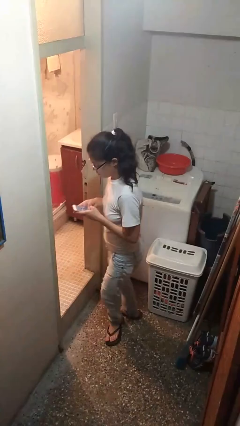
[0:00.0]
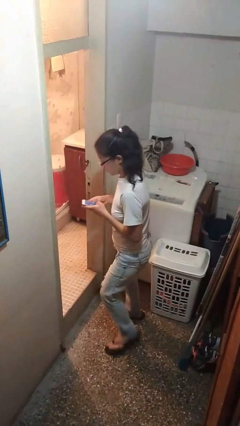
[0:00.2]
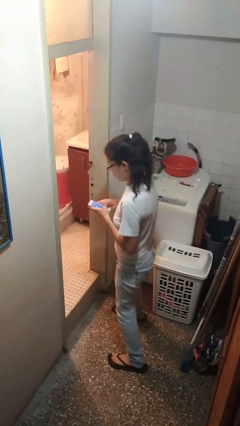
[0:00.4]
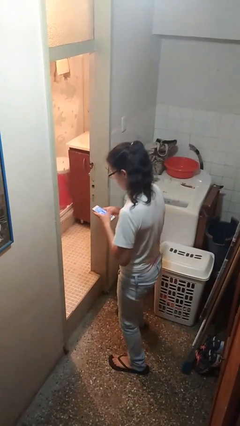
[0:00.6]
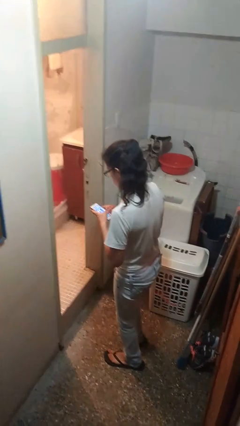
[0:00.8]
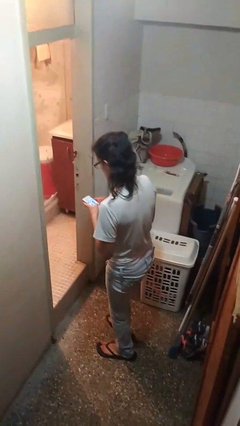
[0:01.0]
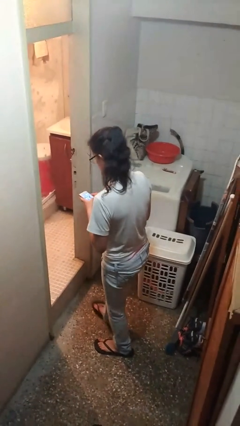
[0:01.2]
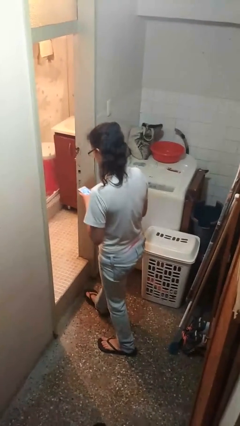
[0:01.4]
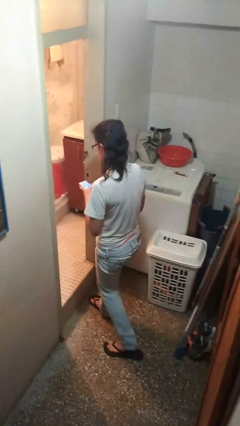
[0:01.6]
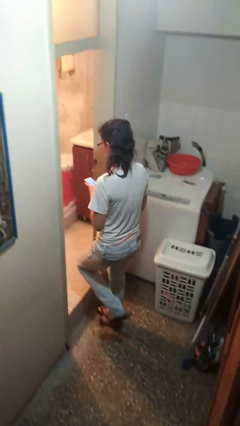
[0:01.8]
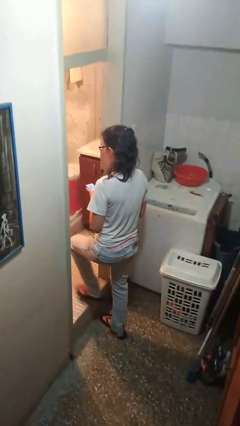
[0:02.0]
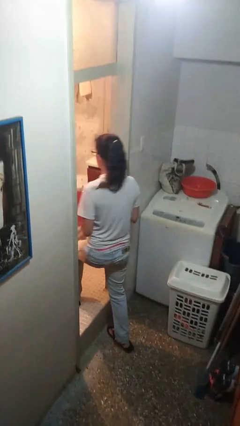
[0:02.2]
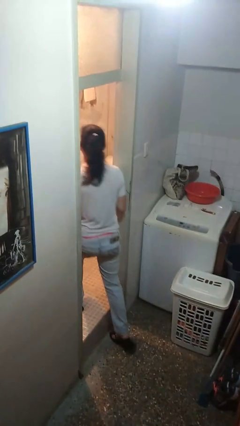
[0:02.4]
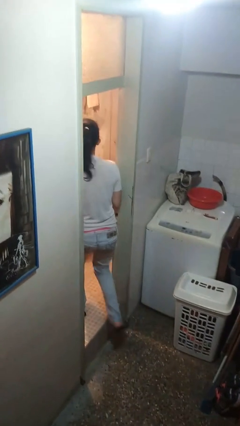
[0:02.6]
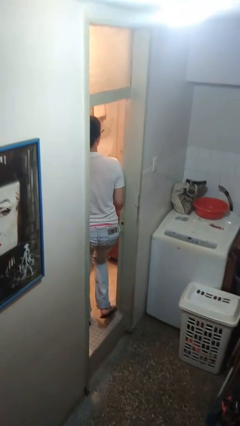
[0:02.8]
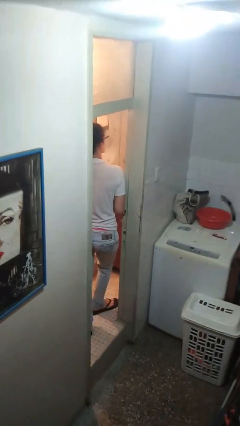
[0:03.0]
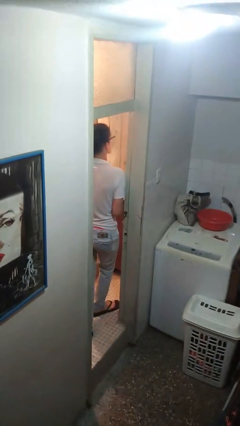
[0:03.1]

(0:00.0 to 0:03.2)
person exits scene through structure

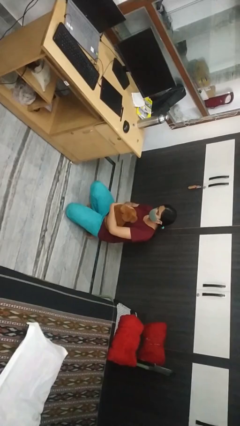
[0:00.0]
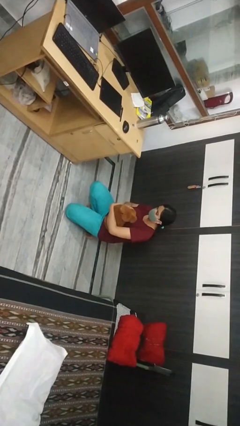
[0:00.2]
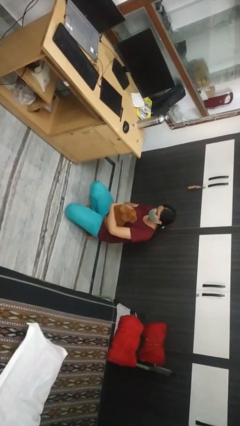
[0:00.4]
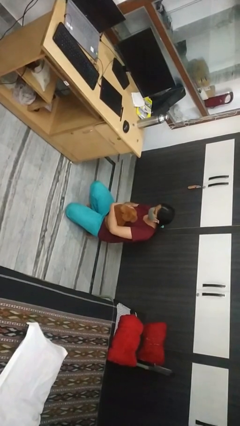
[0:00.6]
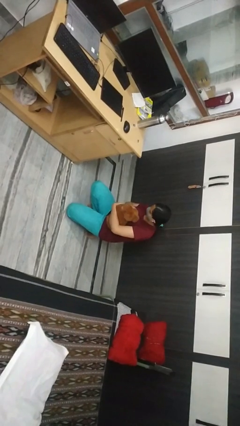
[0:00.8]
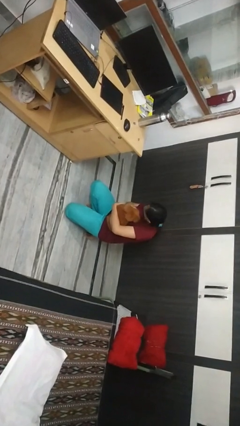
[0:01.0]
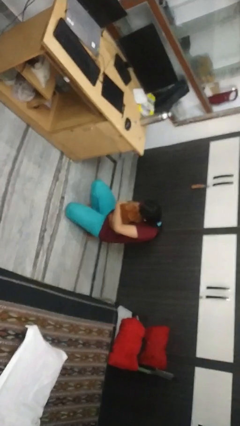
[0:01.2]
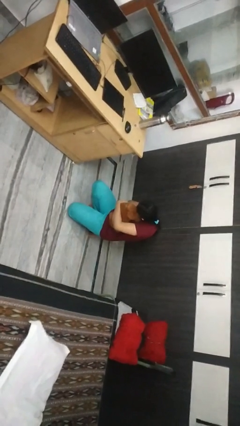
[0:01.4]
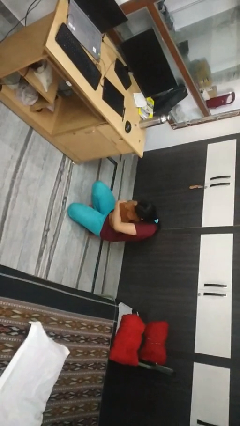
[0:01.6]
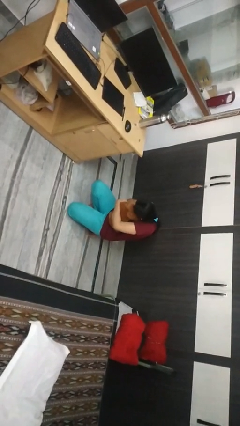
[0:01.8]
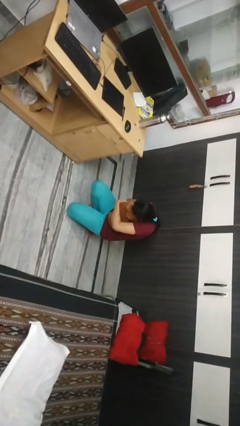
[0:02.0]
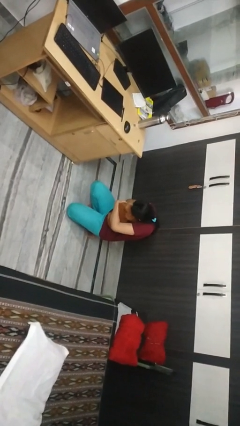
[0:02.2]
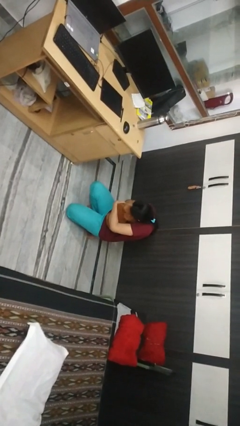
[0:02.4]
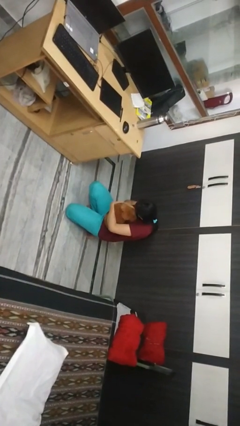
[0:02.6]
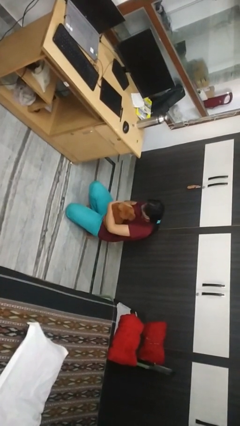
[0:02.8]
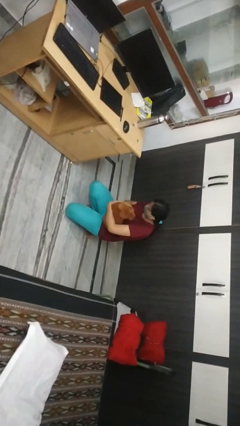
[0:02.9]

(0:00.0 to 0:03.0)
person hugs dog

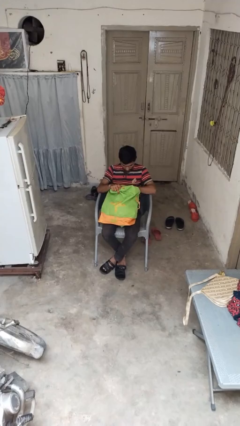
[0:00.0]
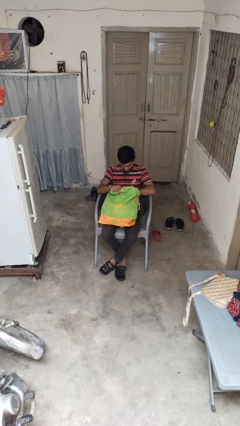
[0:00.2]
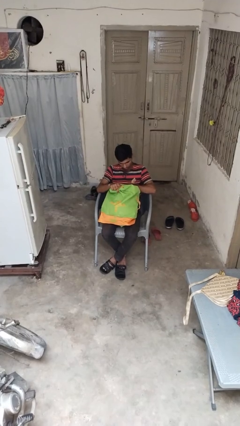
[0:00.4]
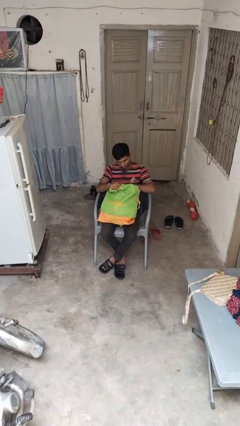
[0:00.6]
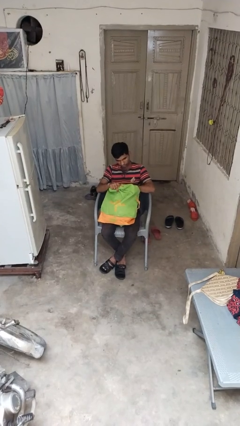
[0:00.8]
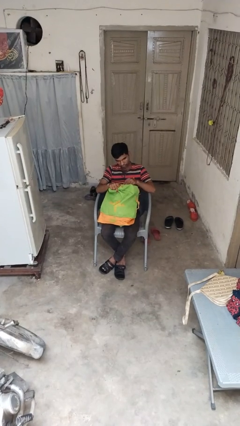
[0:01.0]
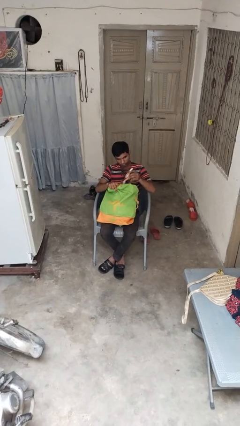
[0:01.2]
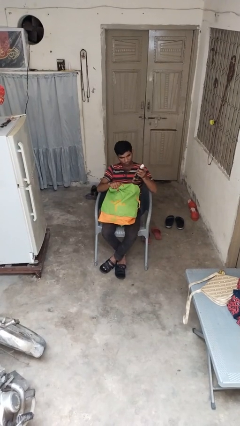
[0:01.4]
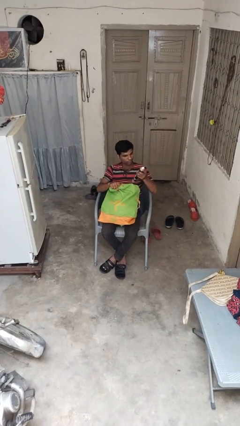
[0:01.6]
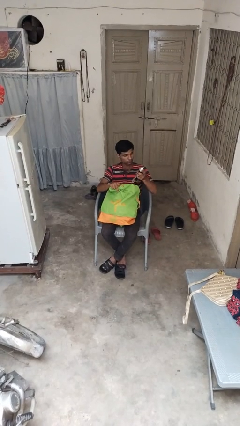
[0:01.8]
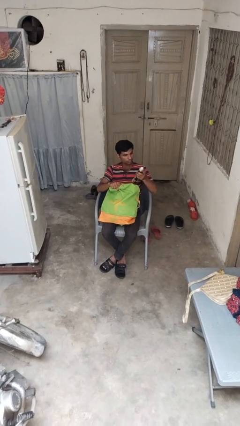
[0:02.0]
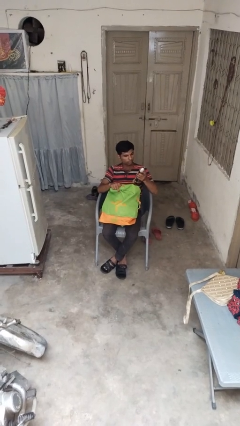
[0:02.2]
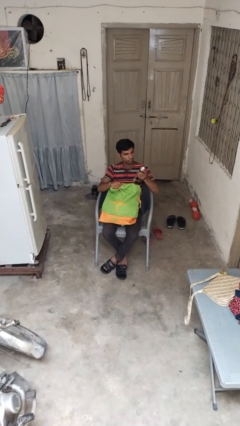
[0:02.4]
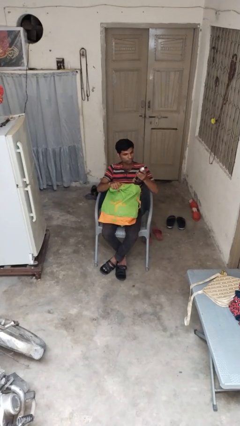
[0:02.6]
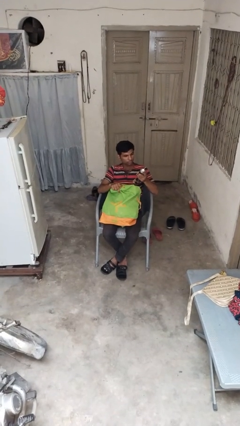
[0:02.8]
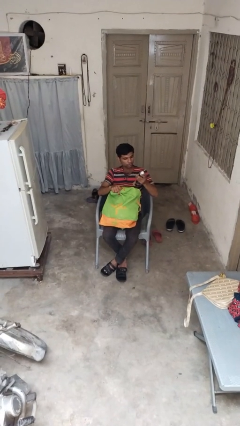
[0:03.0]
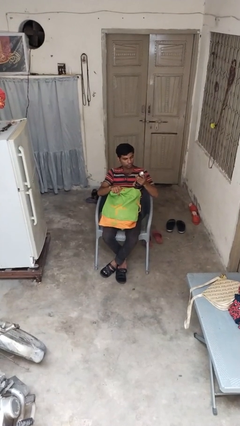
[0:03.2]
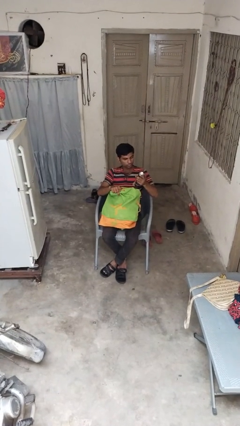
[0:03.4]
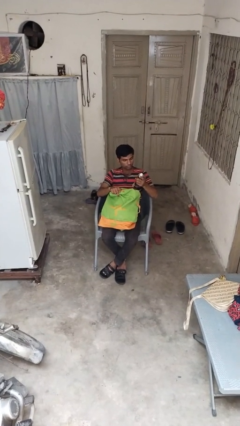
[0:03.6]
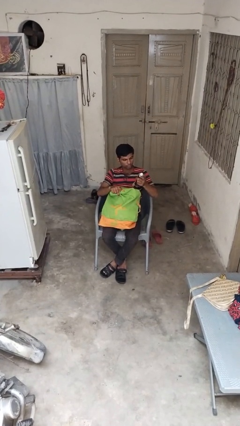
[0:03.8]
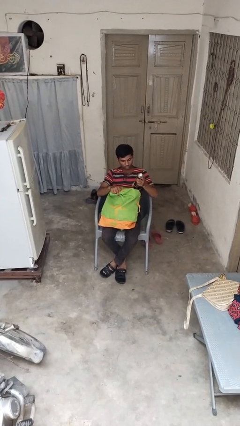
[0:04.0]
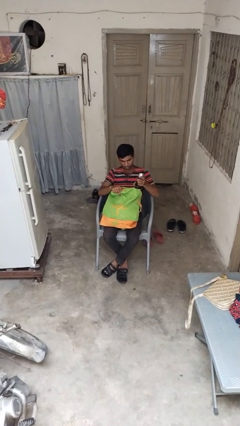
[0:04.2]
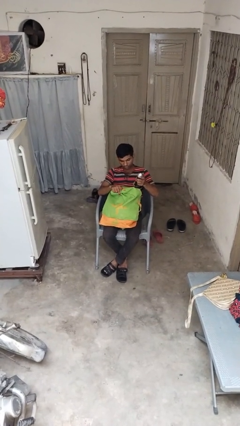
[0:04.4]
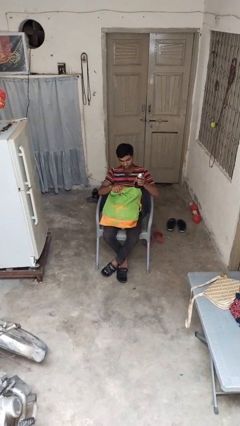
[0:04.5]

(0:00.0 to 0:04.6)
person takes object from backpack

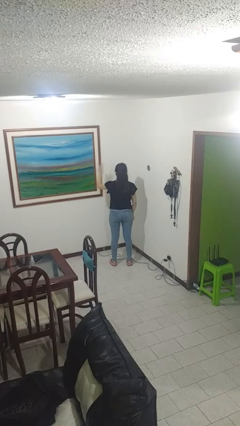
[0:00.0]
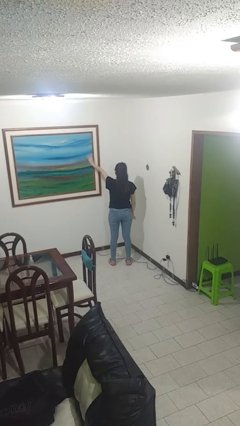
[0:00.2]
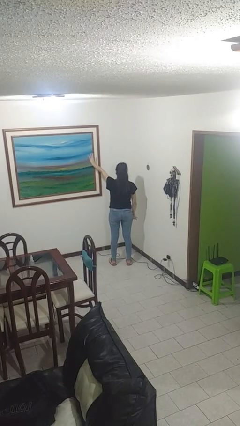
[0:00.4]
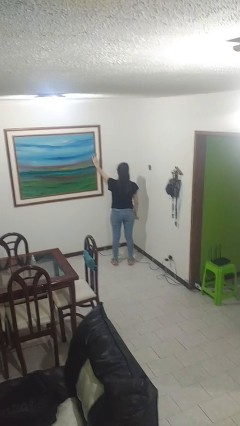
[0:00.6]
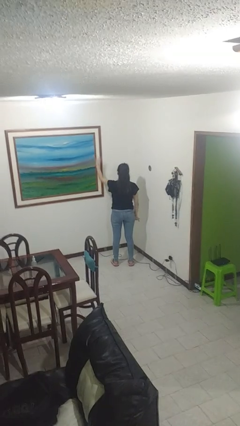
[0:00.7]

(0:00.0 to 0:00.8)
person gestures number three

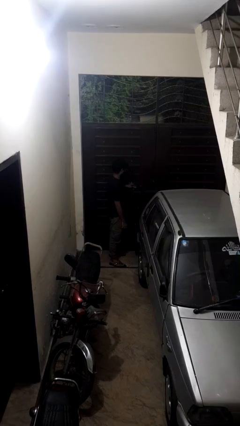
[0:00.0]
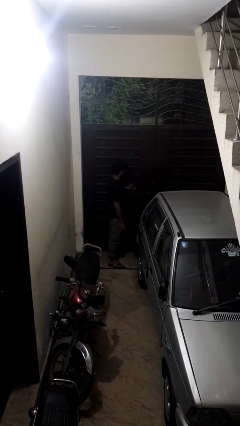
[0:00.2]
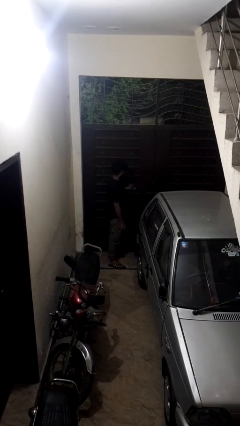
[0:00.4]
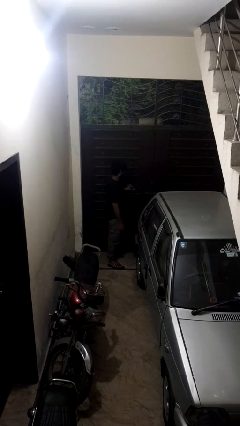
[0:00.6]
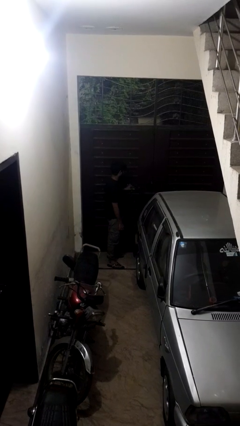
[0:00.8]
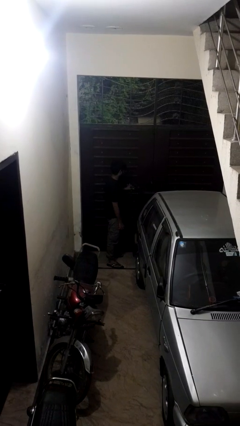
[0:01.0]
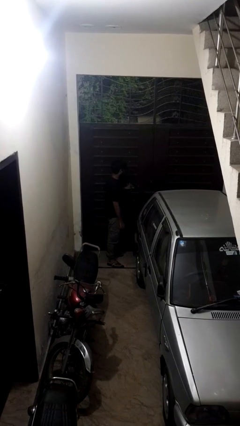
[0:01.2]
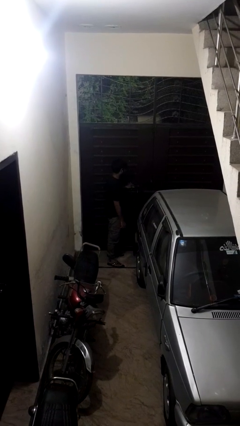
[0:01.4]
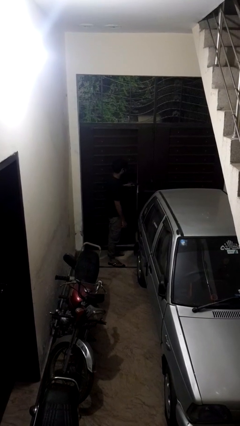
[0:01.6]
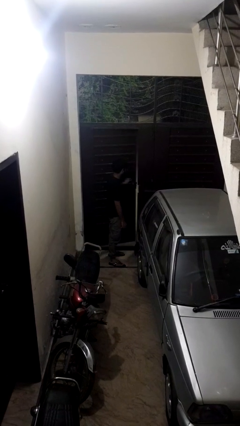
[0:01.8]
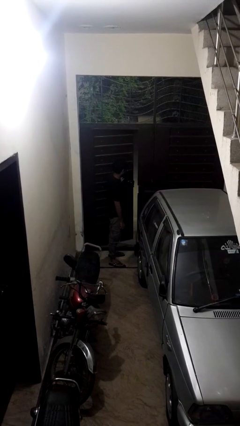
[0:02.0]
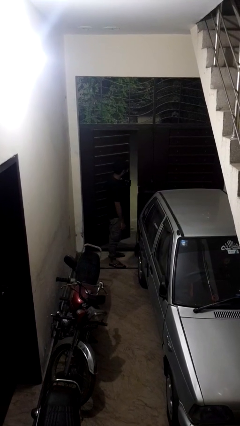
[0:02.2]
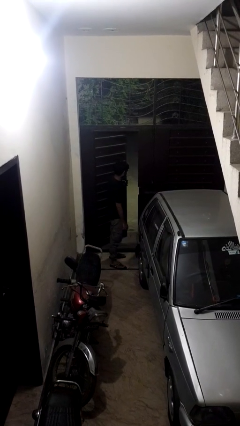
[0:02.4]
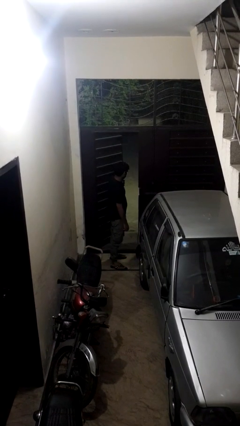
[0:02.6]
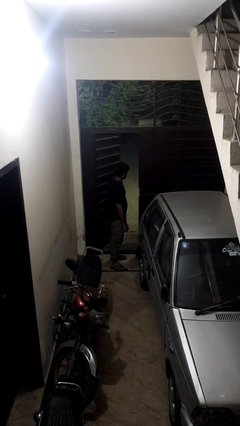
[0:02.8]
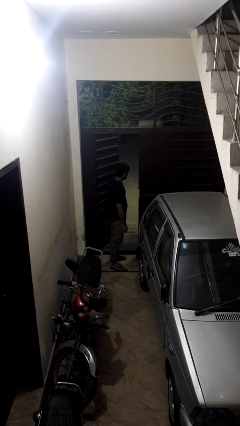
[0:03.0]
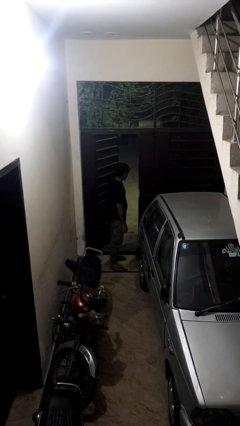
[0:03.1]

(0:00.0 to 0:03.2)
person opens gate

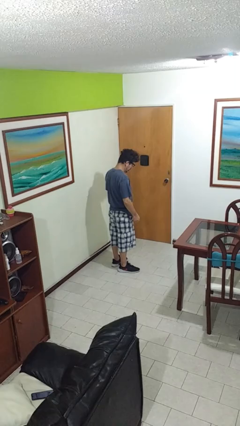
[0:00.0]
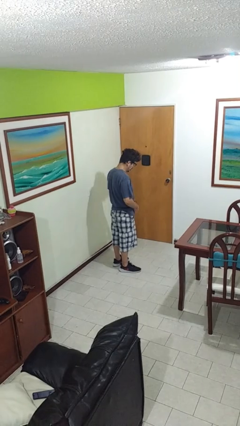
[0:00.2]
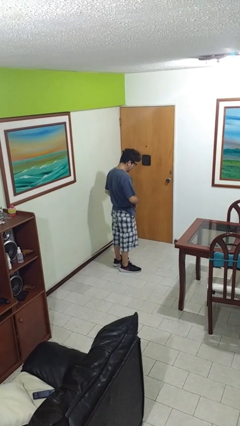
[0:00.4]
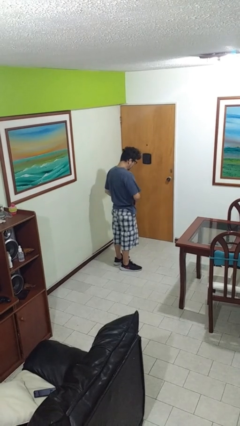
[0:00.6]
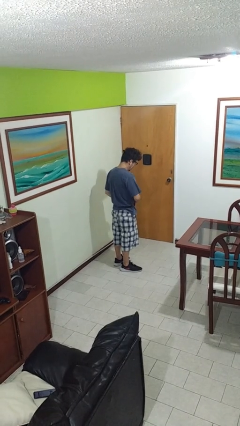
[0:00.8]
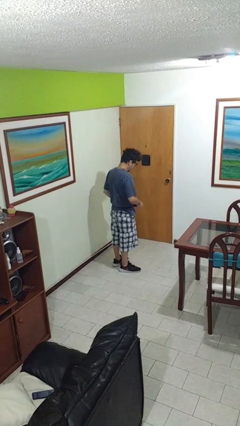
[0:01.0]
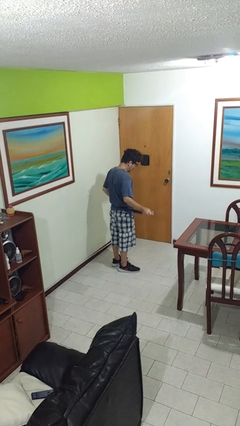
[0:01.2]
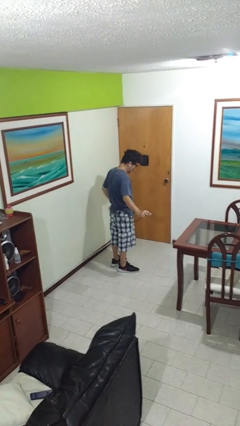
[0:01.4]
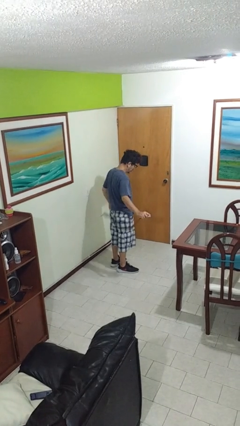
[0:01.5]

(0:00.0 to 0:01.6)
person takes off belt

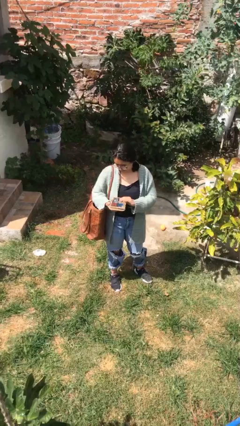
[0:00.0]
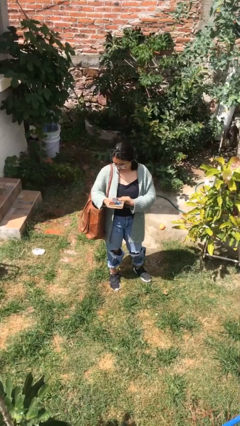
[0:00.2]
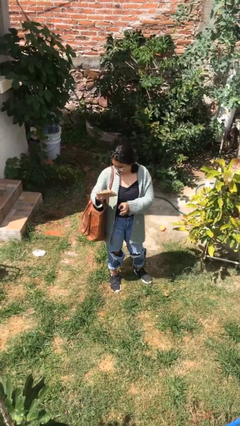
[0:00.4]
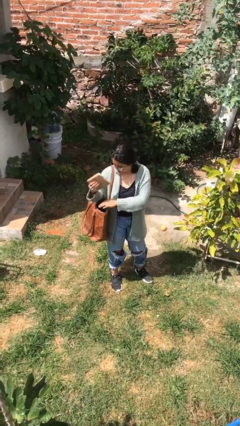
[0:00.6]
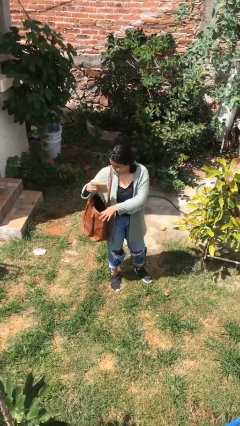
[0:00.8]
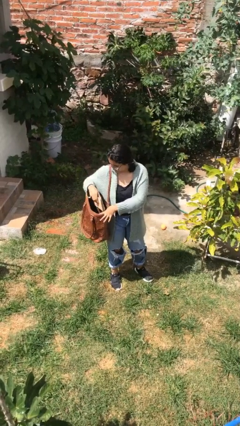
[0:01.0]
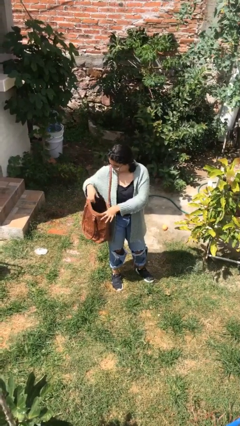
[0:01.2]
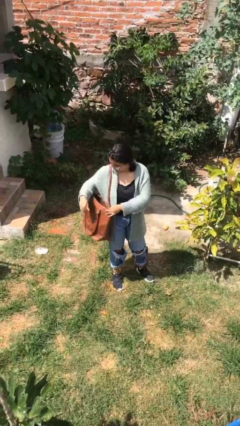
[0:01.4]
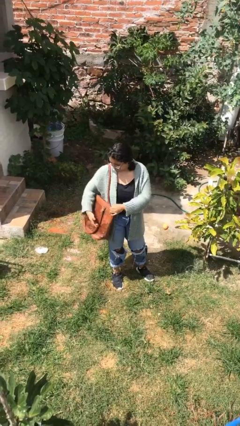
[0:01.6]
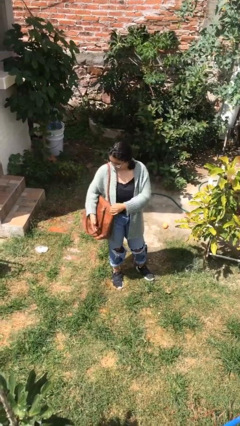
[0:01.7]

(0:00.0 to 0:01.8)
person puts object into purse
